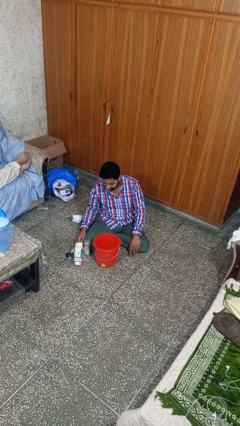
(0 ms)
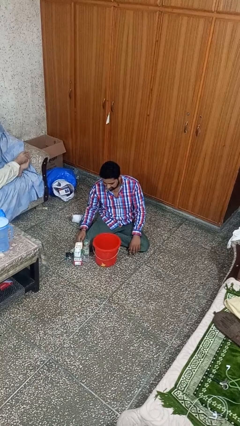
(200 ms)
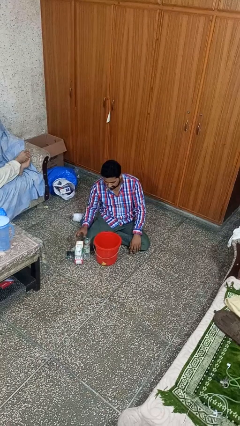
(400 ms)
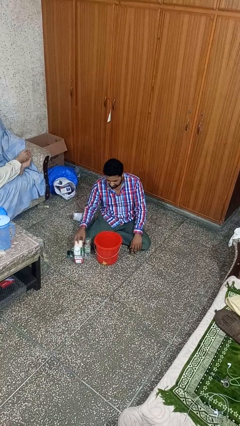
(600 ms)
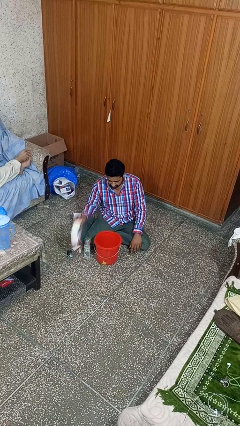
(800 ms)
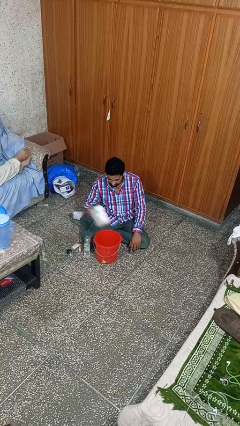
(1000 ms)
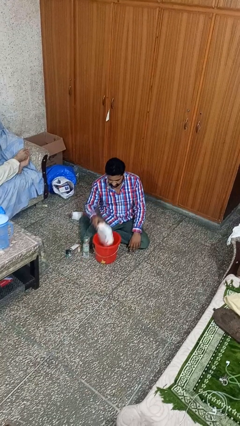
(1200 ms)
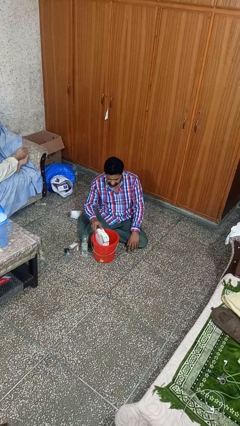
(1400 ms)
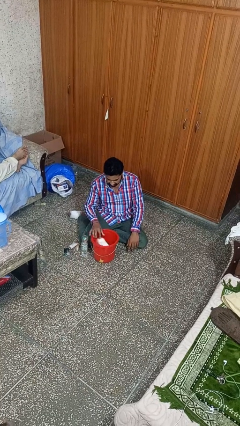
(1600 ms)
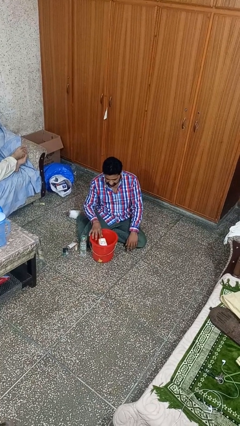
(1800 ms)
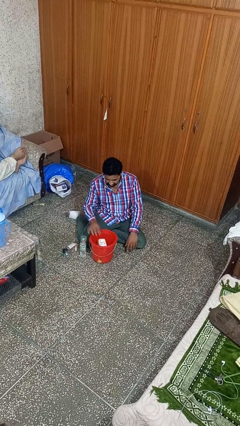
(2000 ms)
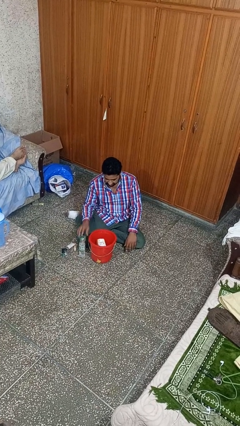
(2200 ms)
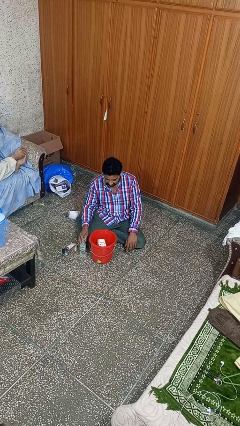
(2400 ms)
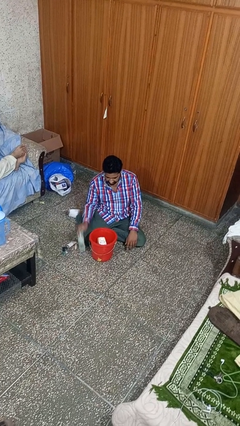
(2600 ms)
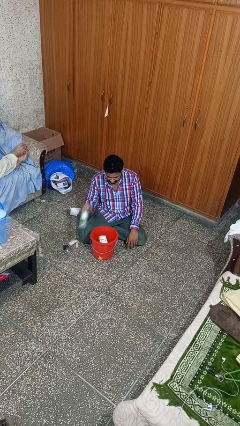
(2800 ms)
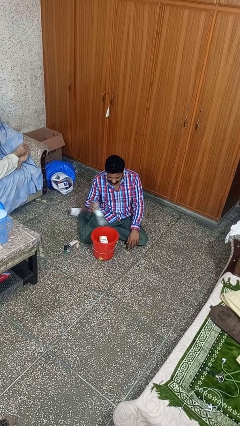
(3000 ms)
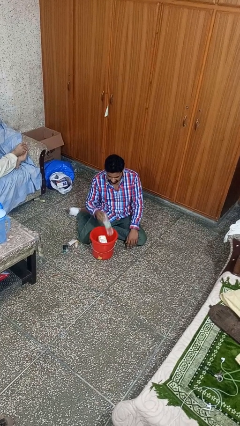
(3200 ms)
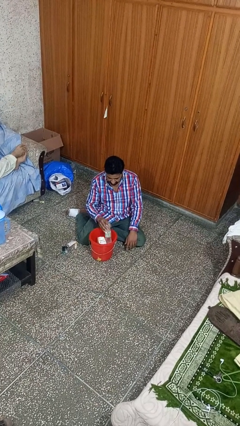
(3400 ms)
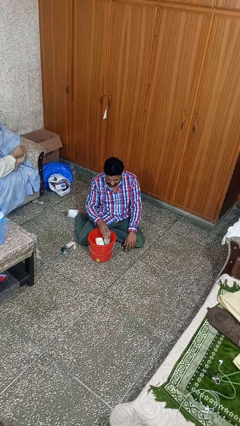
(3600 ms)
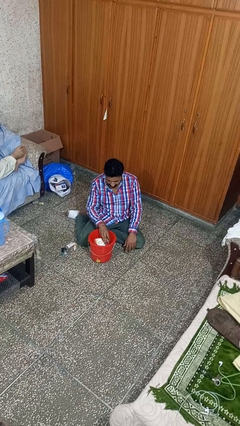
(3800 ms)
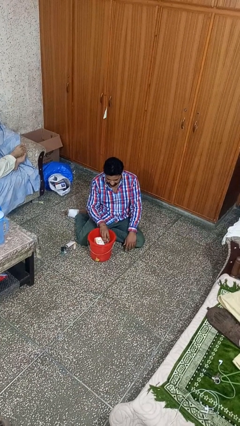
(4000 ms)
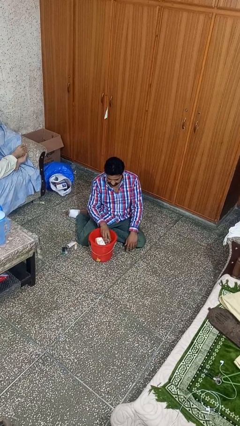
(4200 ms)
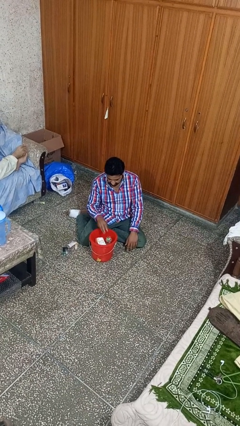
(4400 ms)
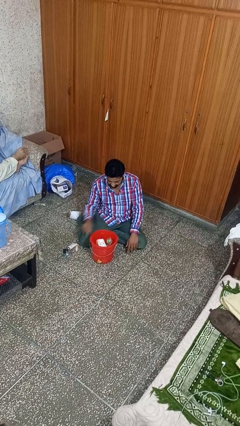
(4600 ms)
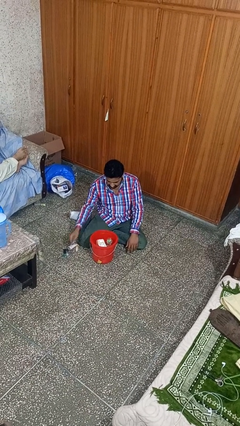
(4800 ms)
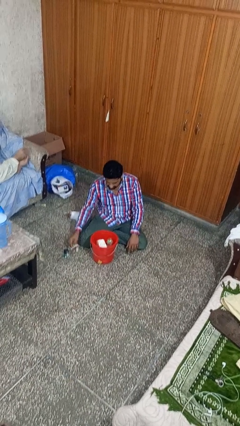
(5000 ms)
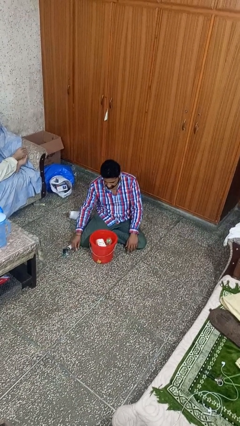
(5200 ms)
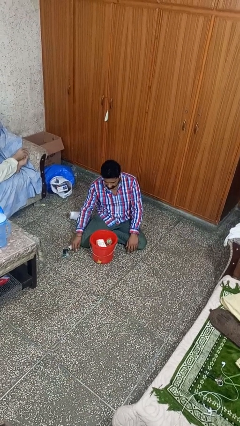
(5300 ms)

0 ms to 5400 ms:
person puts object into basket

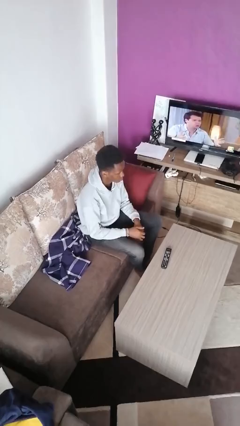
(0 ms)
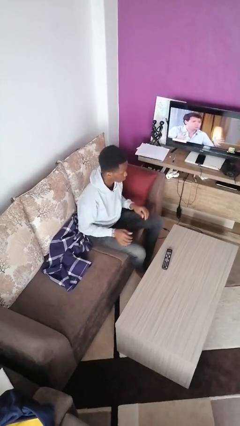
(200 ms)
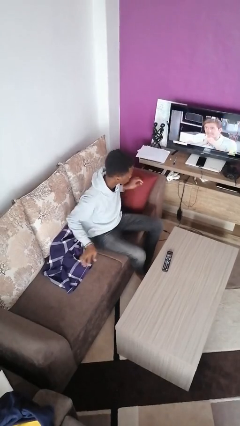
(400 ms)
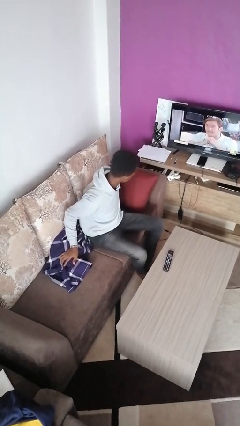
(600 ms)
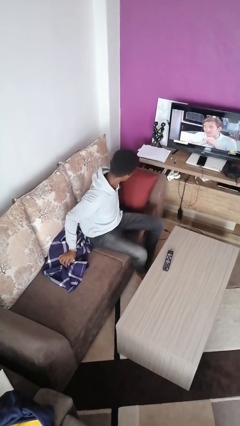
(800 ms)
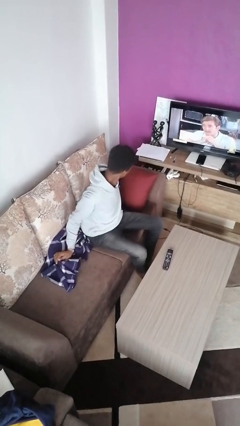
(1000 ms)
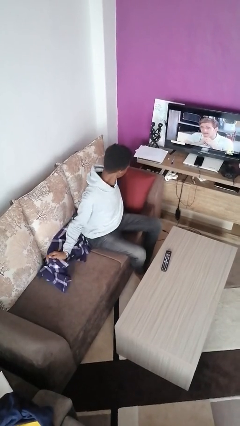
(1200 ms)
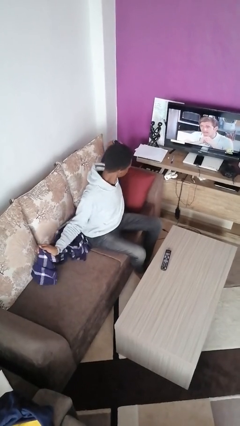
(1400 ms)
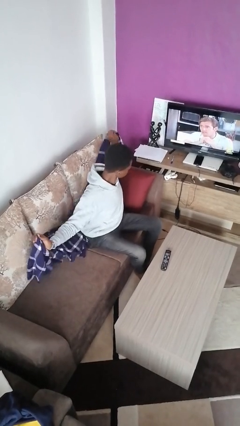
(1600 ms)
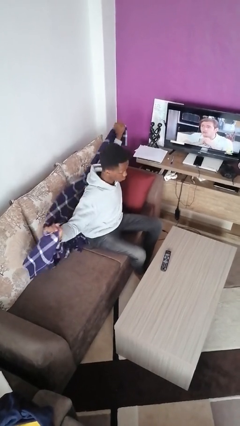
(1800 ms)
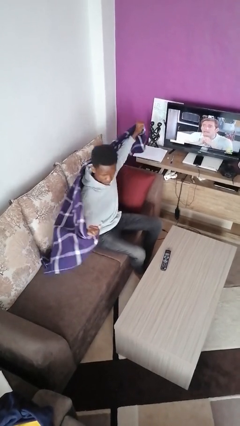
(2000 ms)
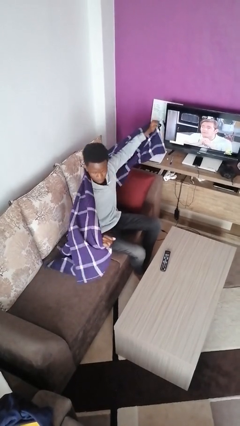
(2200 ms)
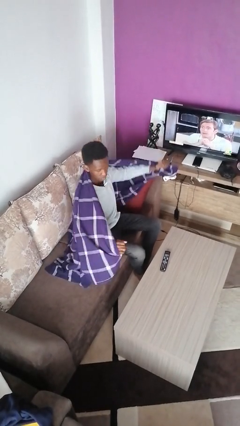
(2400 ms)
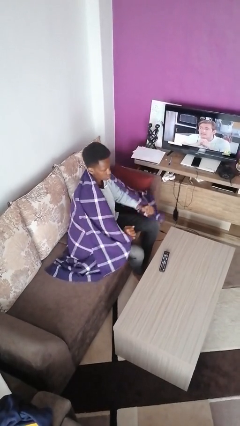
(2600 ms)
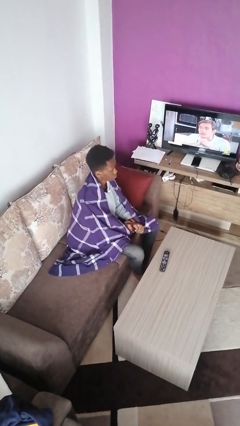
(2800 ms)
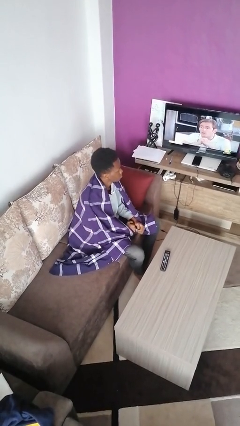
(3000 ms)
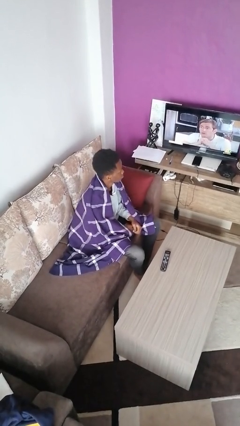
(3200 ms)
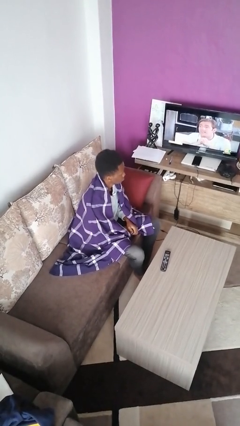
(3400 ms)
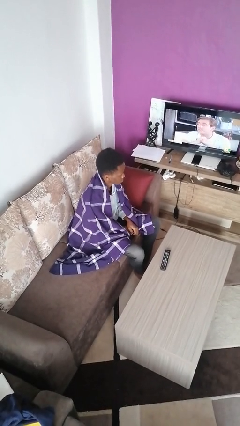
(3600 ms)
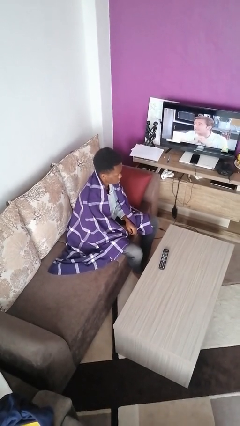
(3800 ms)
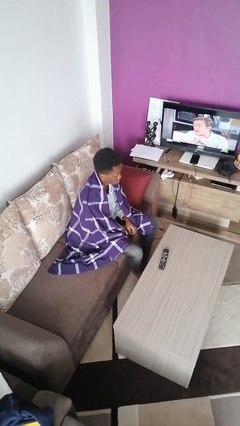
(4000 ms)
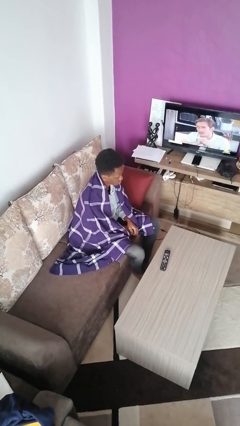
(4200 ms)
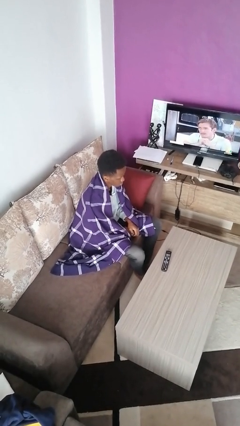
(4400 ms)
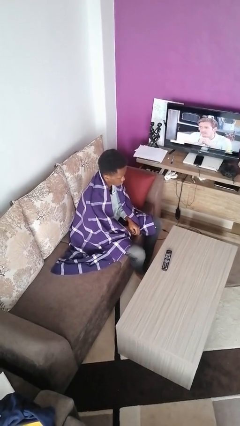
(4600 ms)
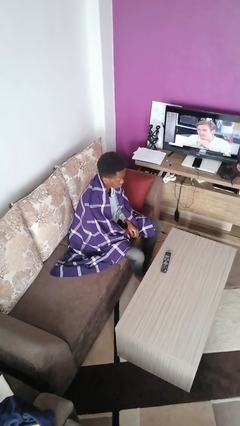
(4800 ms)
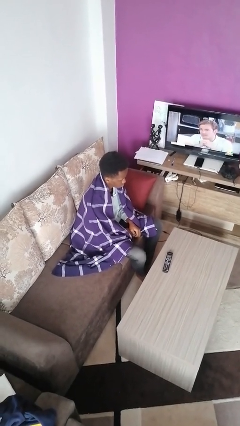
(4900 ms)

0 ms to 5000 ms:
person covers with blanket

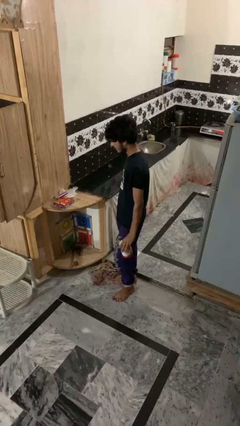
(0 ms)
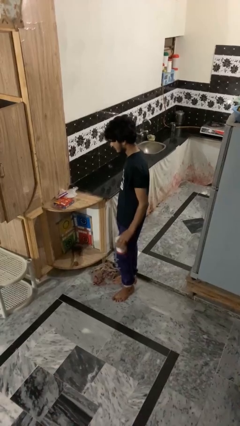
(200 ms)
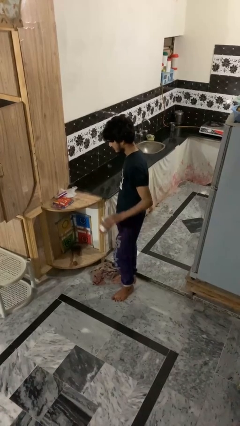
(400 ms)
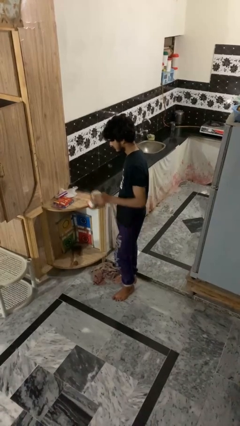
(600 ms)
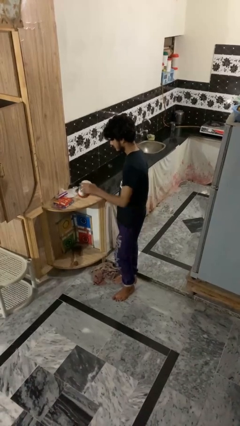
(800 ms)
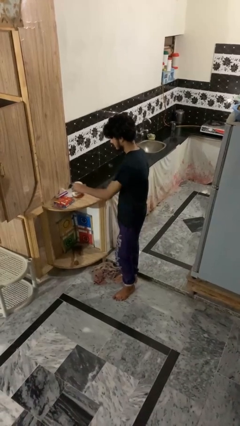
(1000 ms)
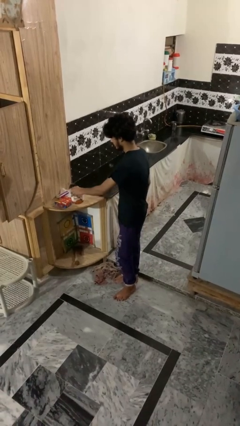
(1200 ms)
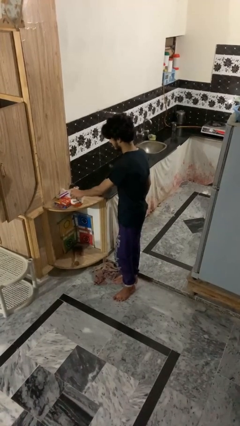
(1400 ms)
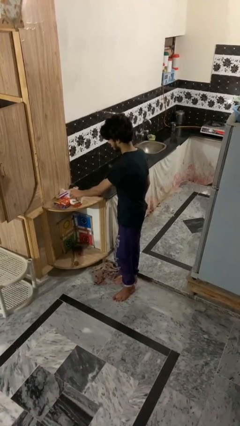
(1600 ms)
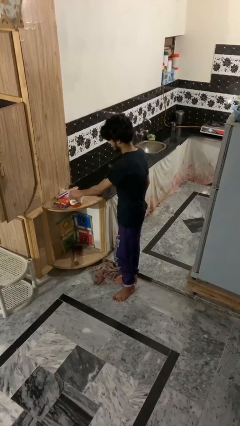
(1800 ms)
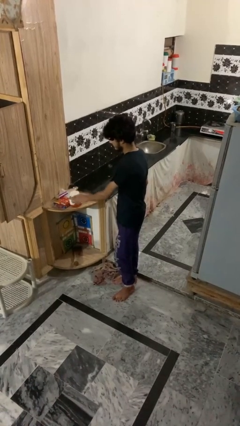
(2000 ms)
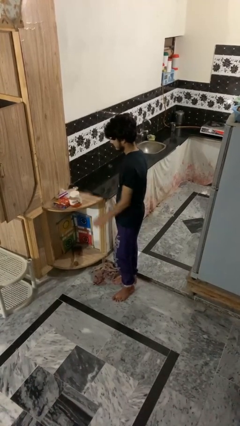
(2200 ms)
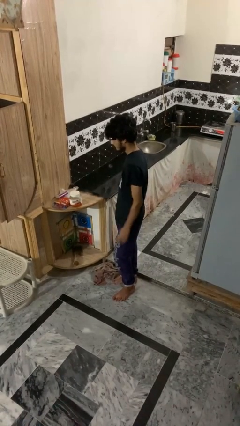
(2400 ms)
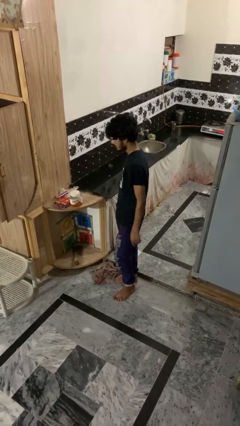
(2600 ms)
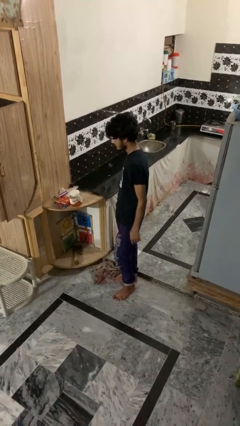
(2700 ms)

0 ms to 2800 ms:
person puts down object on countertop

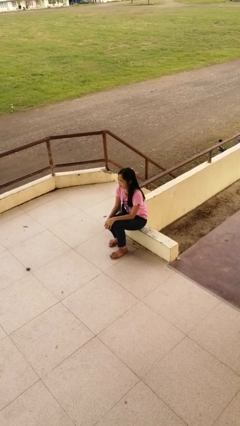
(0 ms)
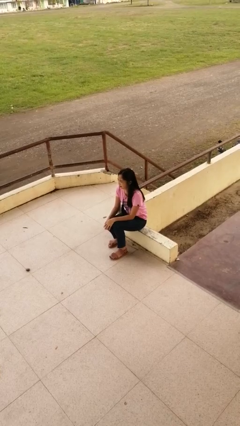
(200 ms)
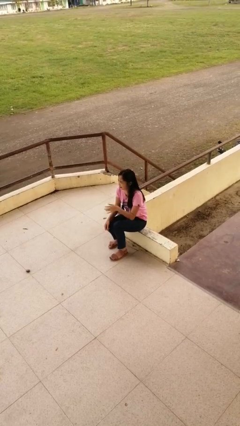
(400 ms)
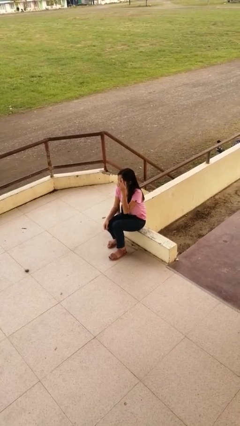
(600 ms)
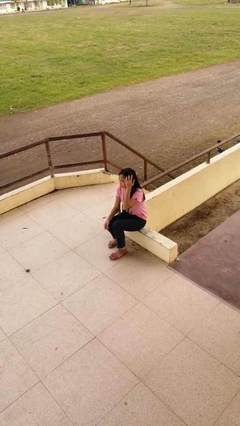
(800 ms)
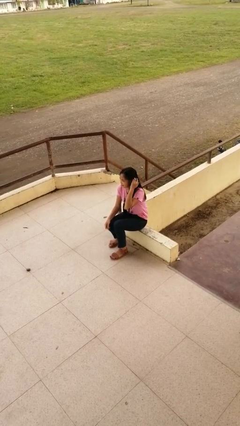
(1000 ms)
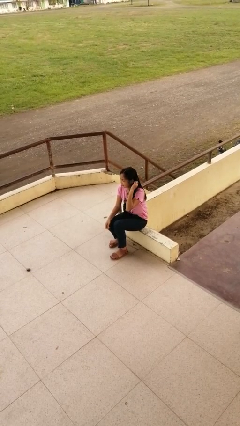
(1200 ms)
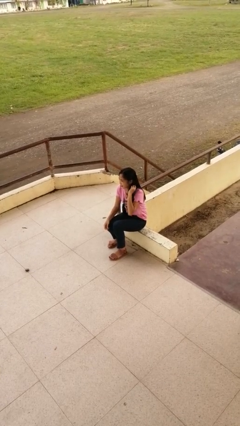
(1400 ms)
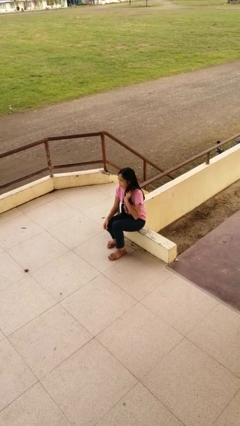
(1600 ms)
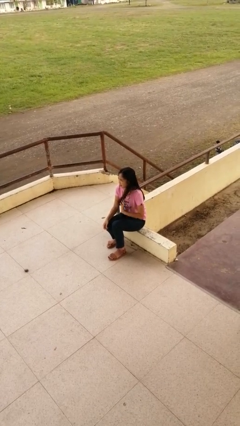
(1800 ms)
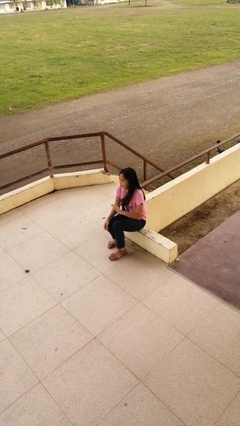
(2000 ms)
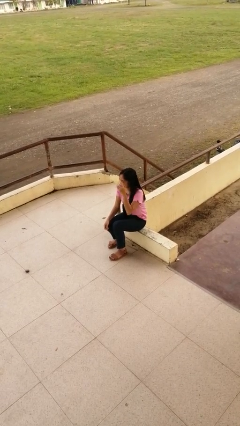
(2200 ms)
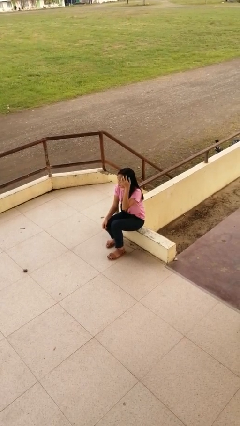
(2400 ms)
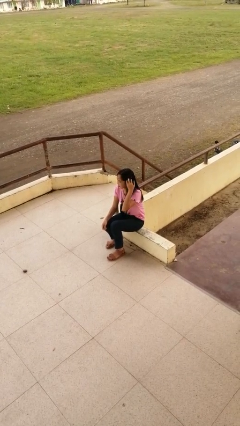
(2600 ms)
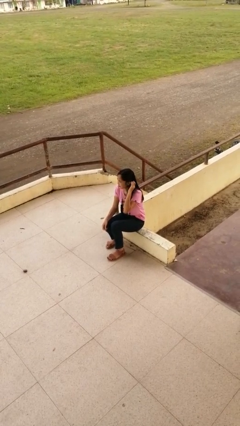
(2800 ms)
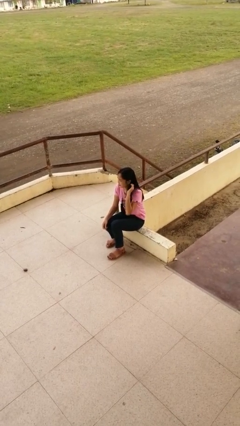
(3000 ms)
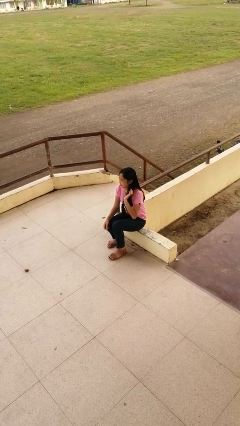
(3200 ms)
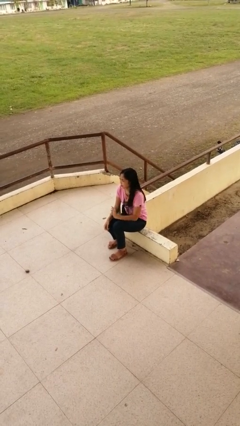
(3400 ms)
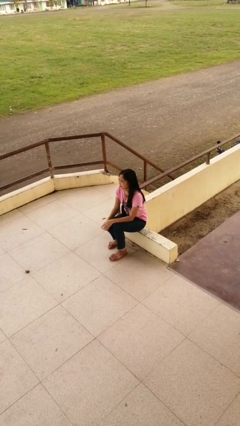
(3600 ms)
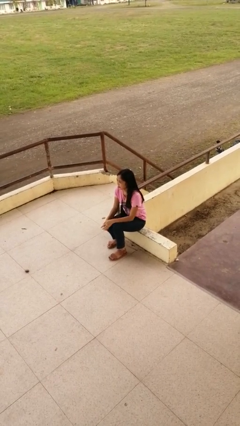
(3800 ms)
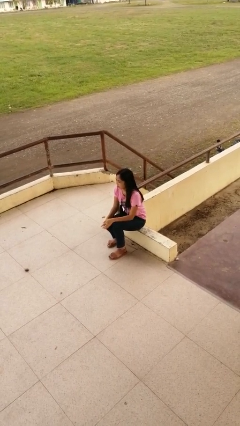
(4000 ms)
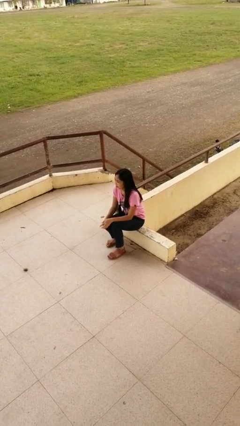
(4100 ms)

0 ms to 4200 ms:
person strokes hair

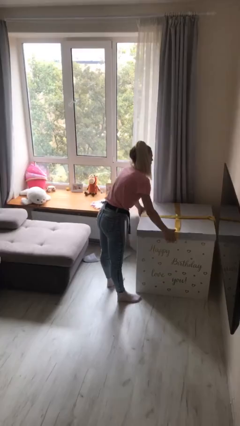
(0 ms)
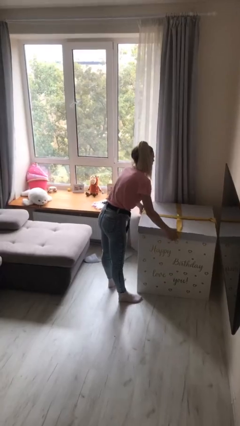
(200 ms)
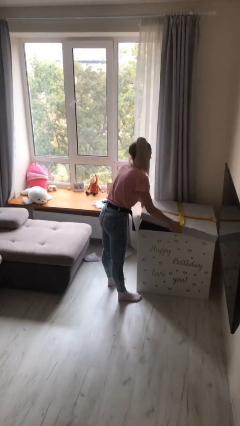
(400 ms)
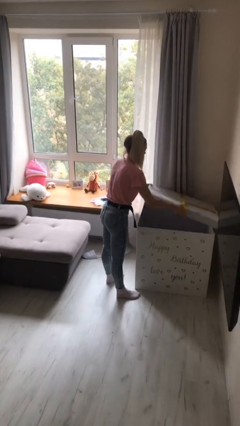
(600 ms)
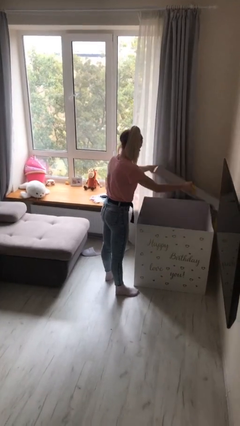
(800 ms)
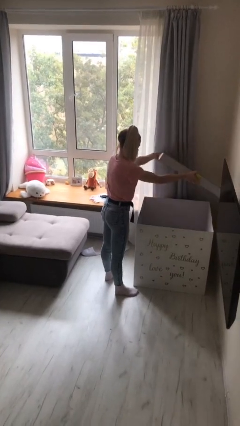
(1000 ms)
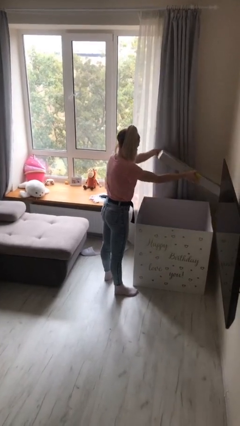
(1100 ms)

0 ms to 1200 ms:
person opens box
